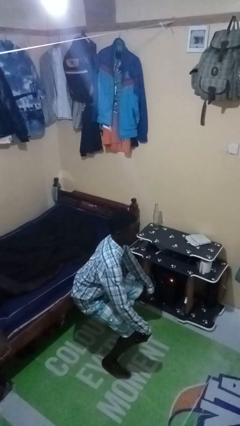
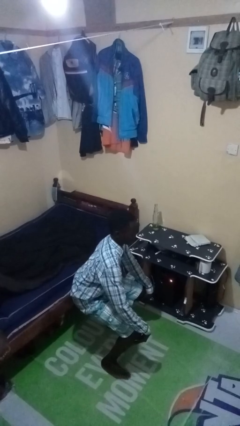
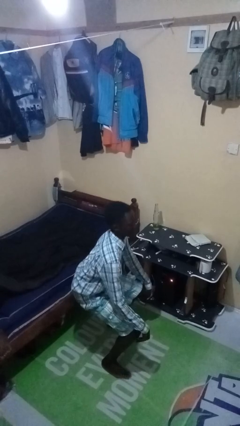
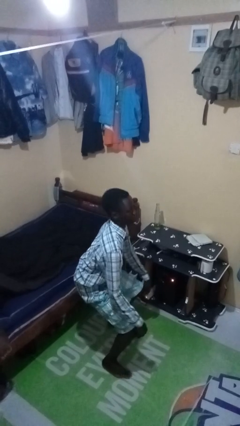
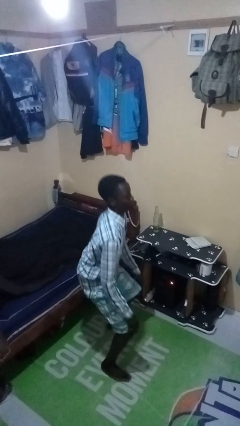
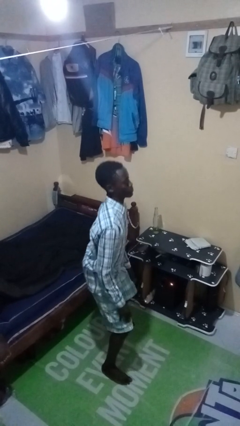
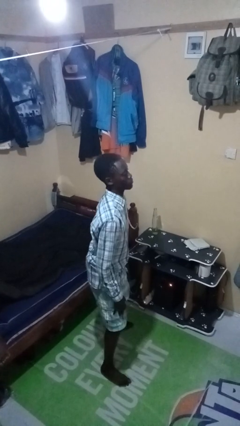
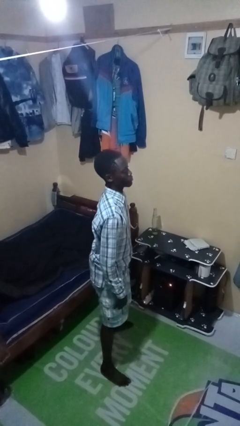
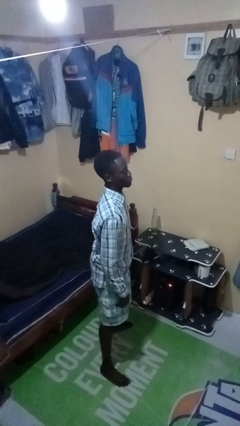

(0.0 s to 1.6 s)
person stands up

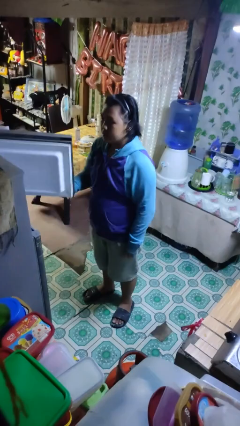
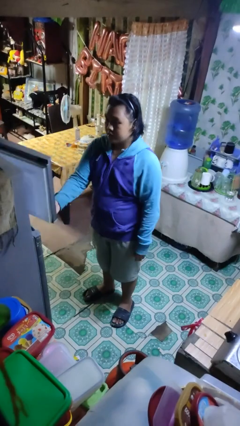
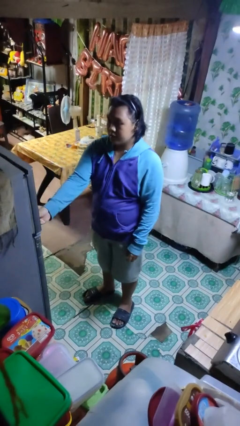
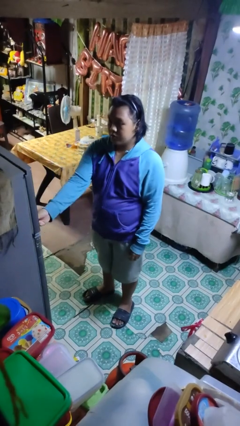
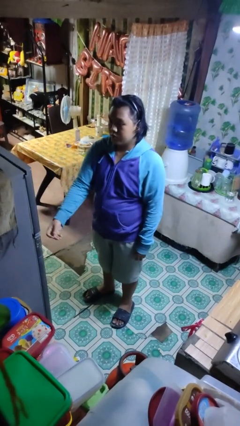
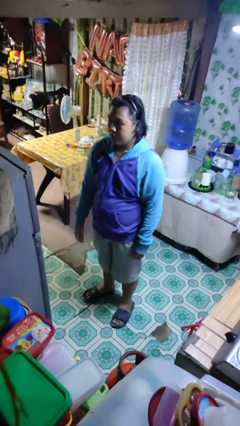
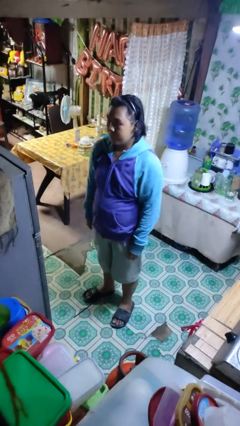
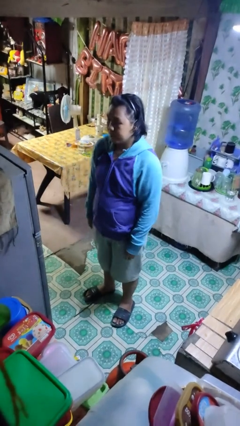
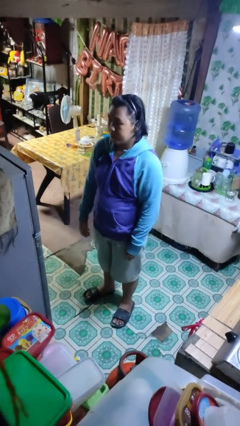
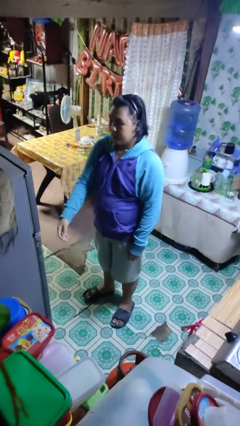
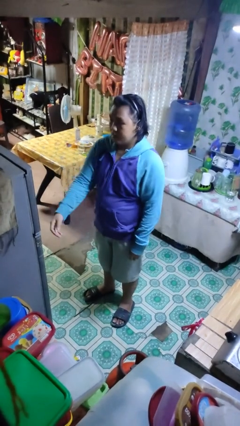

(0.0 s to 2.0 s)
person closes refrigerator

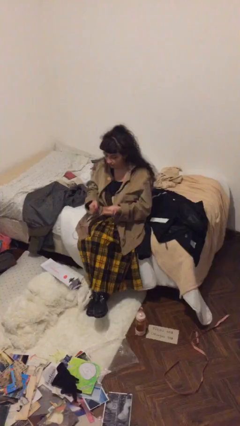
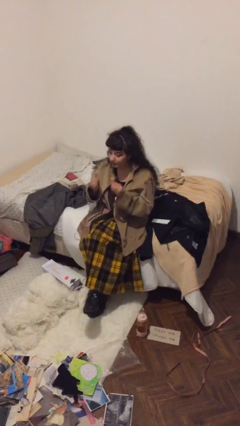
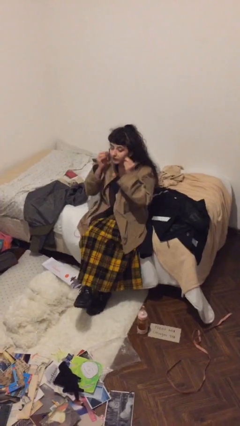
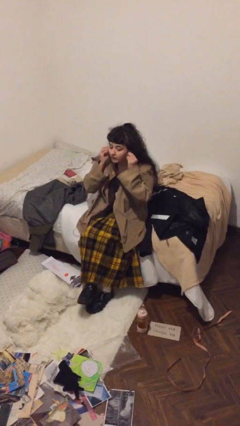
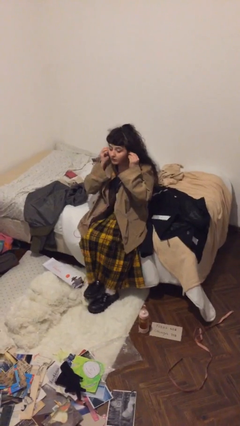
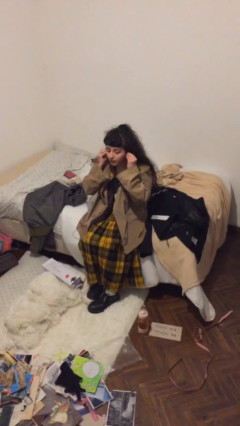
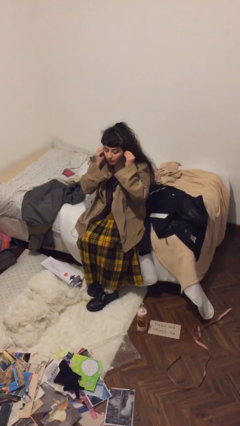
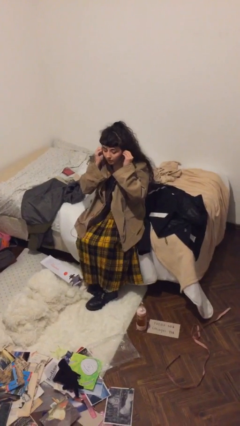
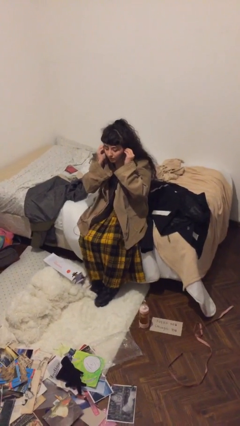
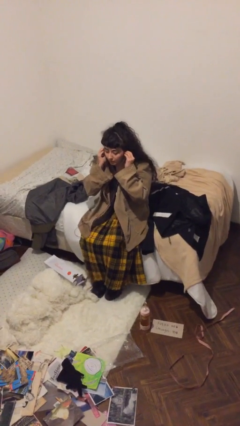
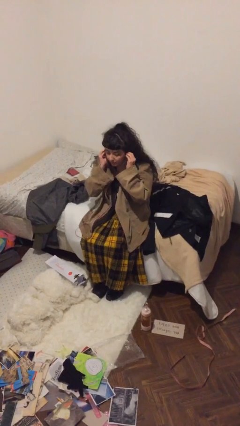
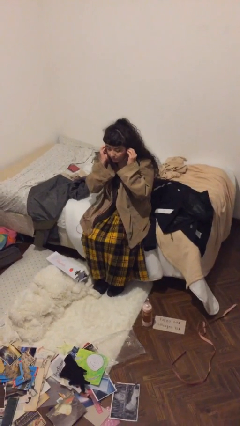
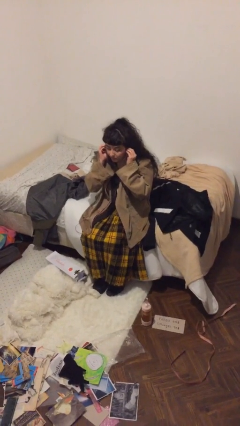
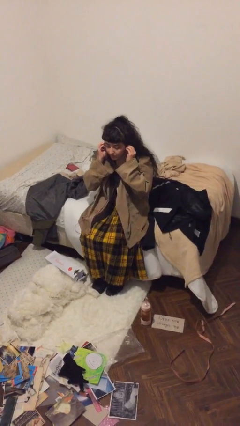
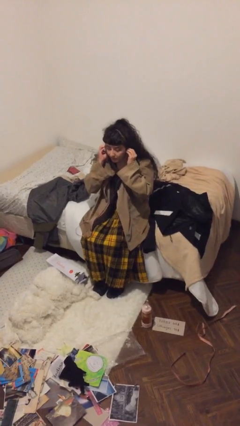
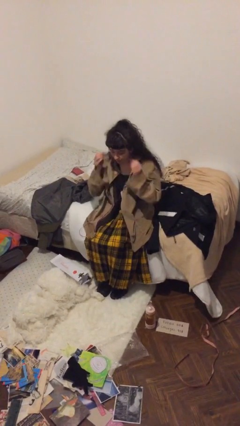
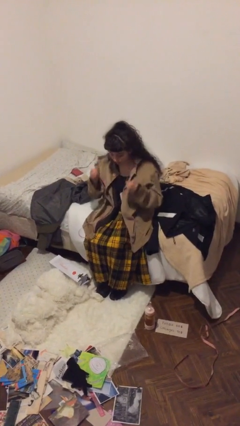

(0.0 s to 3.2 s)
person puts on headphones

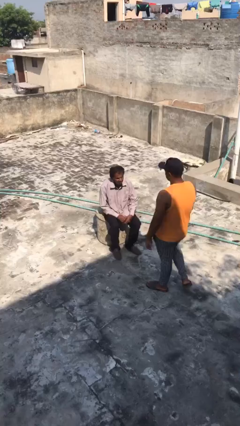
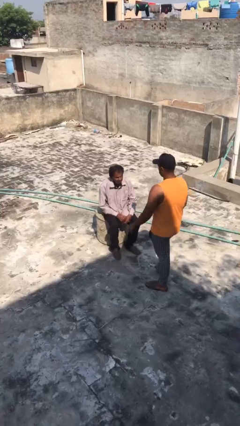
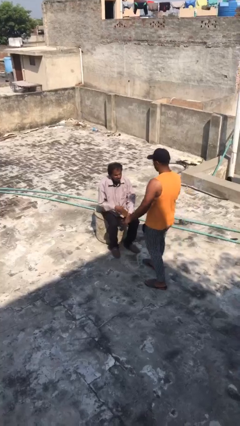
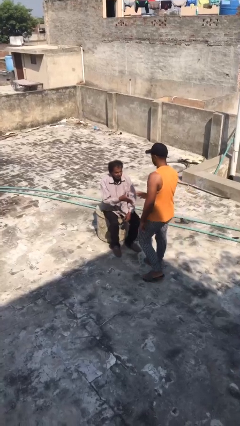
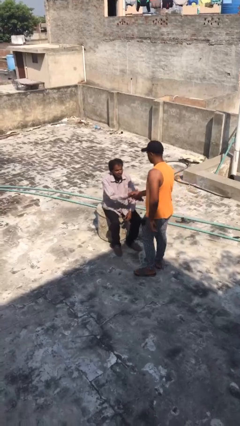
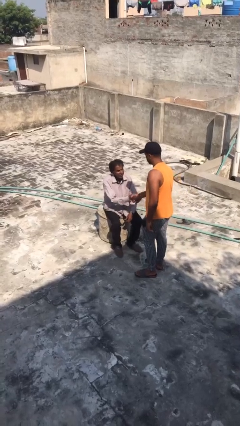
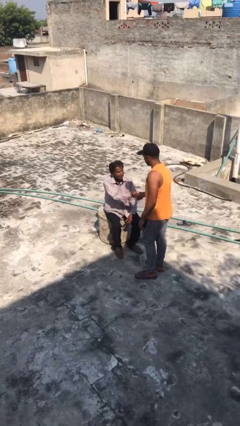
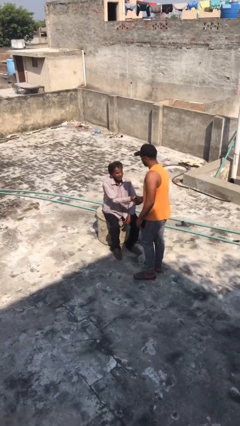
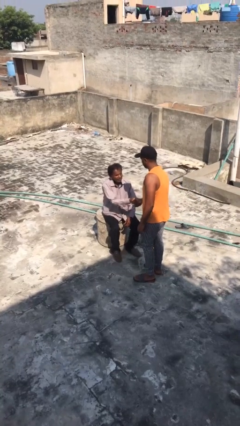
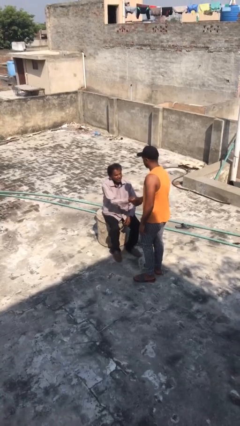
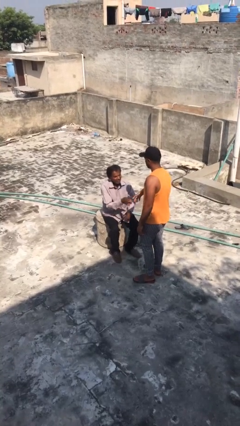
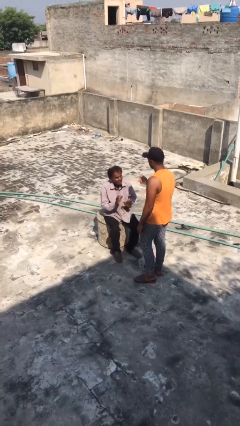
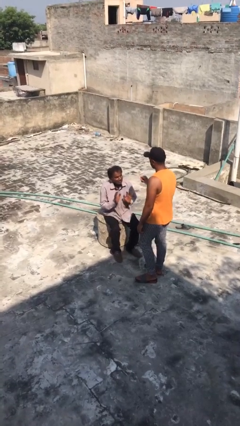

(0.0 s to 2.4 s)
person shakes hand

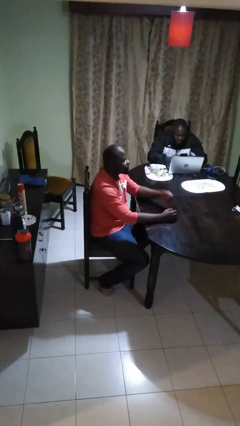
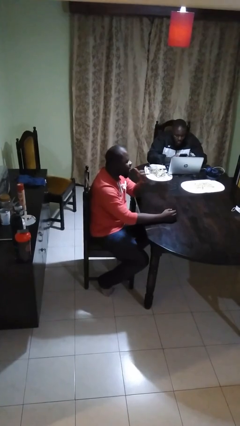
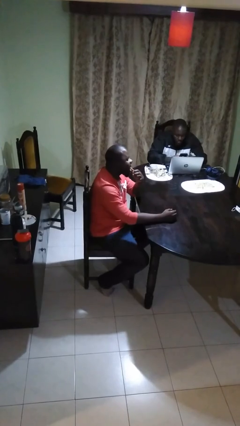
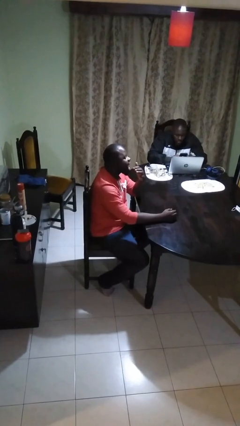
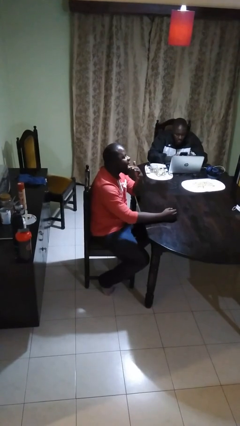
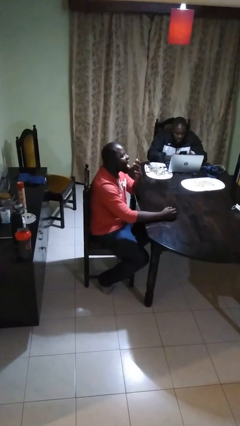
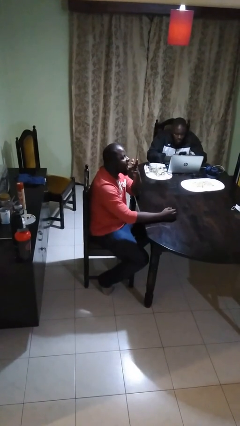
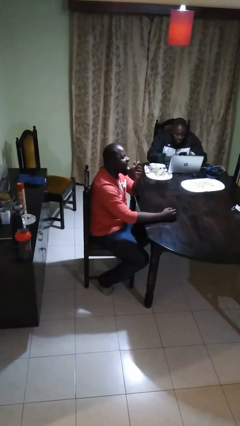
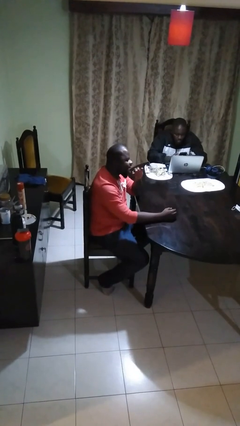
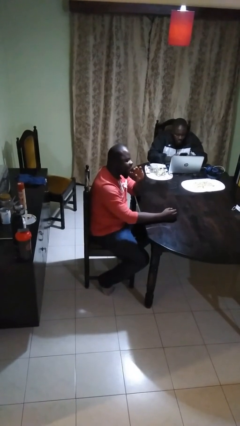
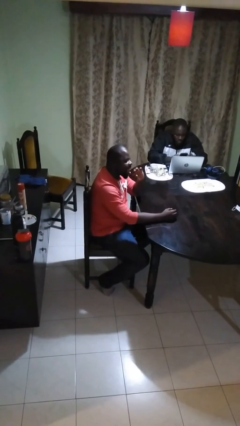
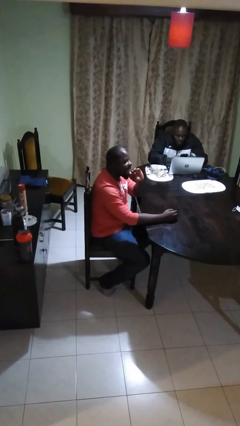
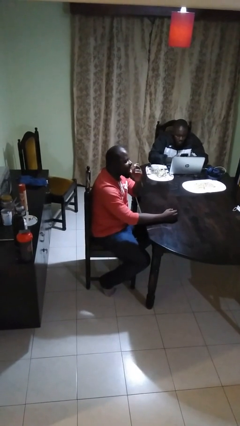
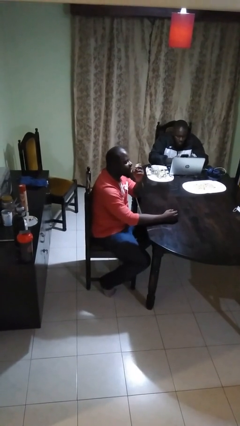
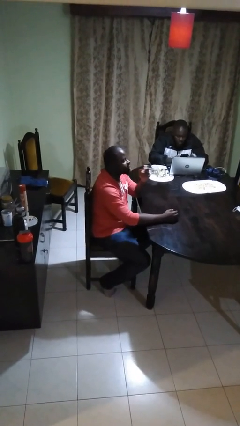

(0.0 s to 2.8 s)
person licks fingers

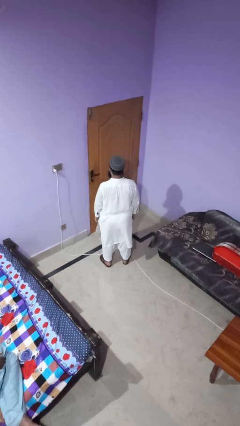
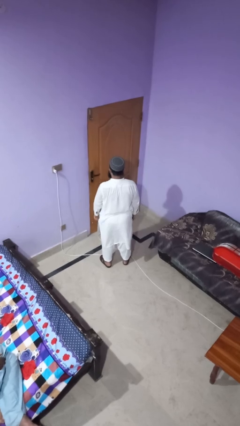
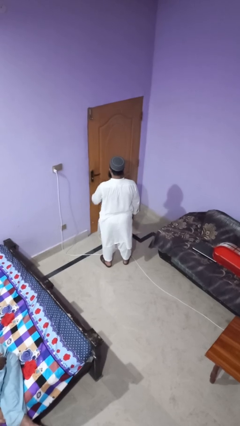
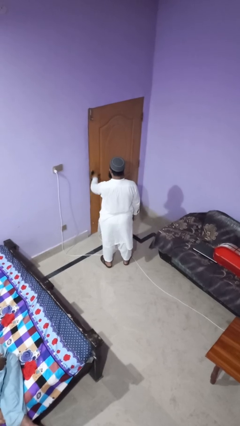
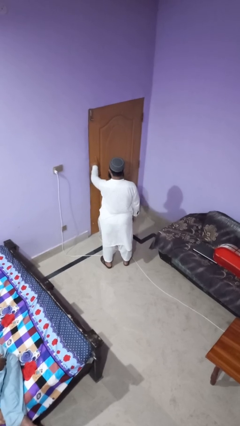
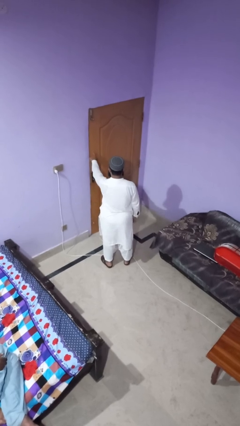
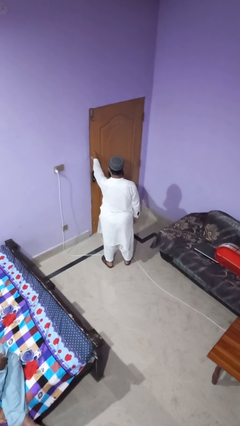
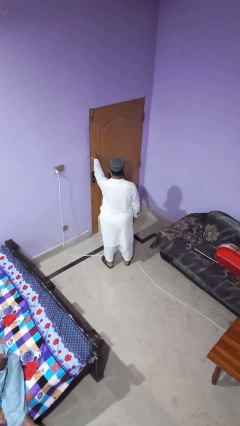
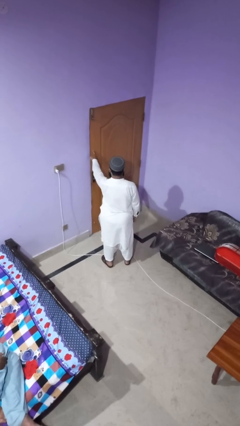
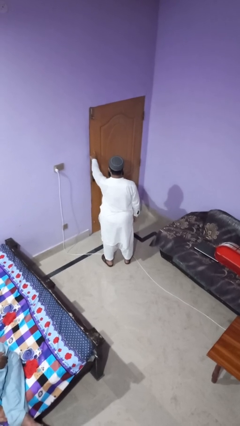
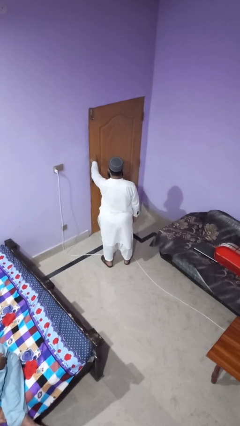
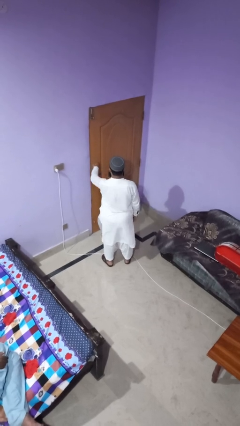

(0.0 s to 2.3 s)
person taps object with finger

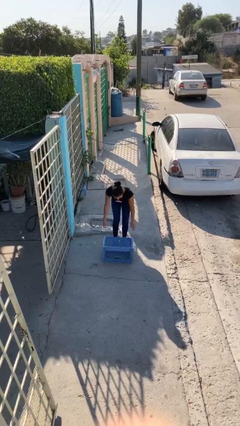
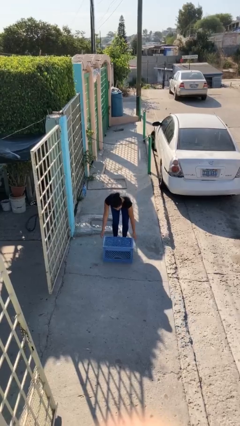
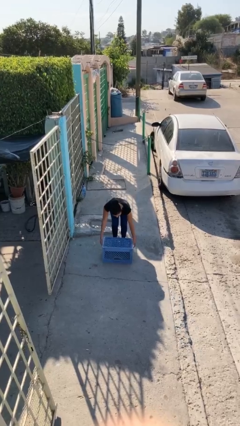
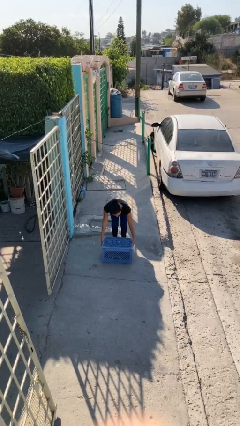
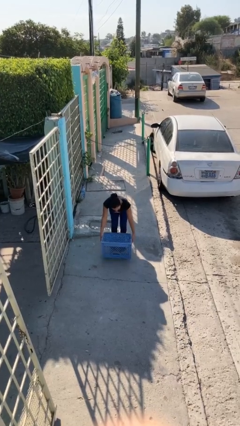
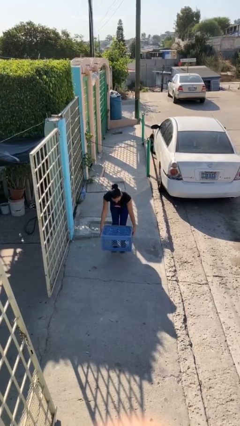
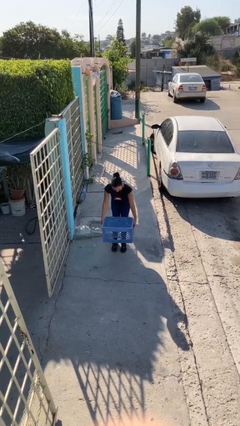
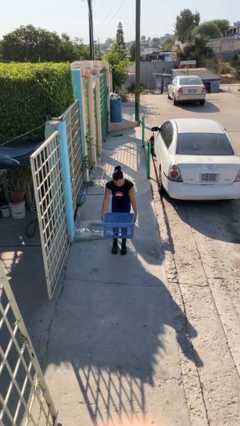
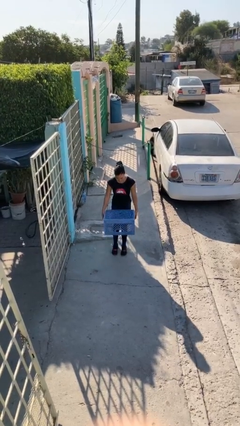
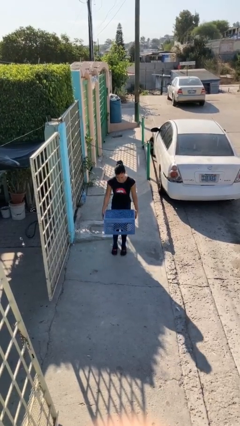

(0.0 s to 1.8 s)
person picks up object from floor

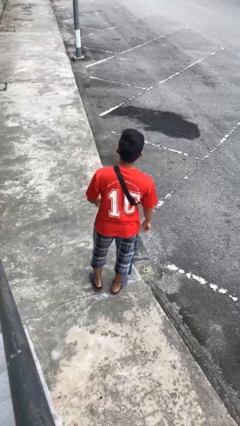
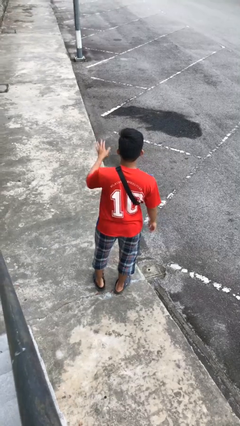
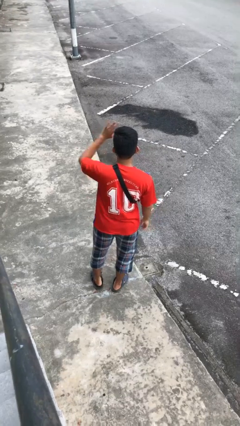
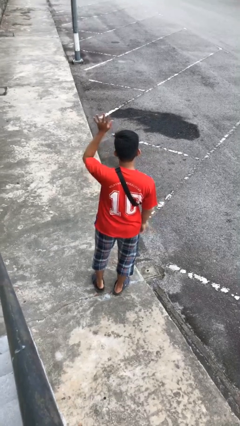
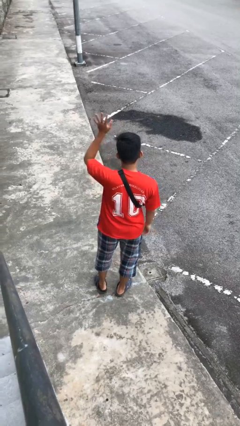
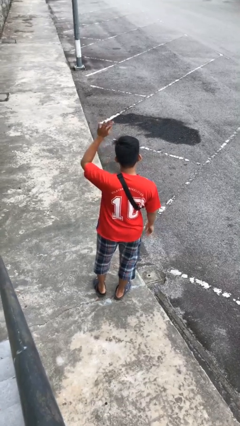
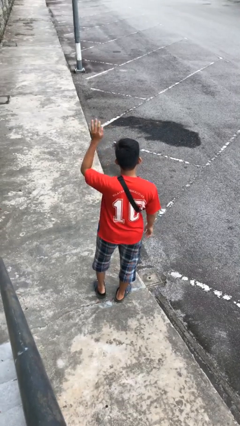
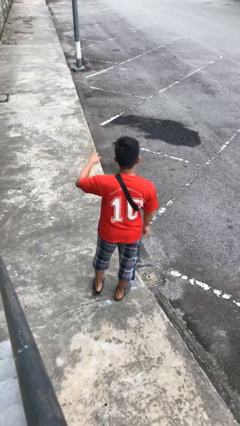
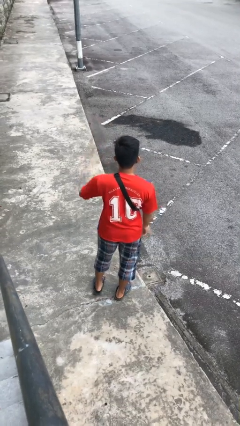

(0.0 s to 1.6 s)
person waves at person
